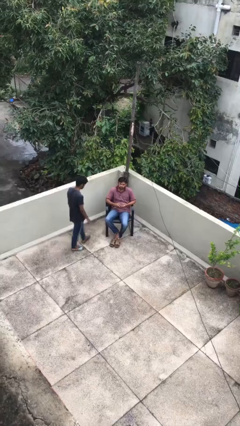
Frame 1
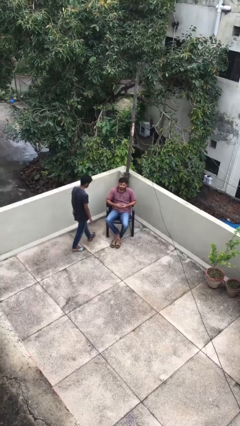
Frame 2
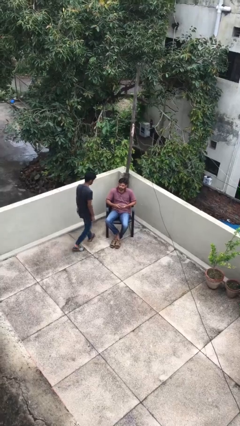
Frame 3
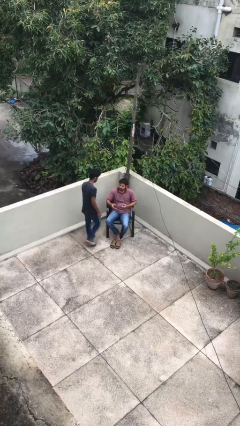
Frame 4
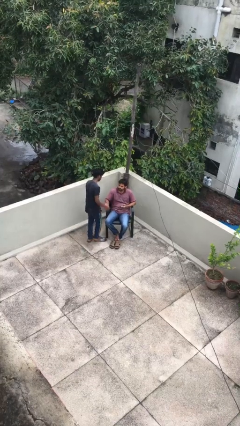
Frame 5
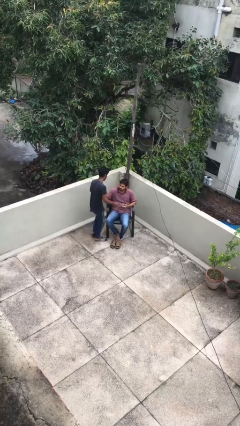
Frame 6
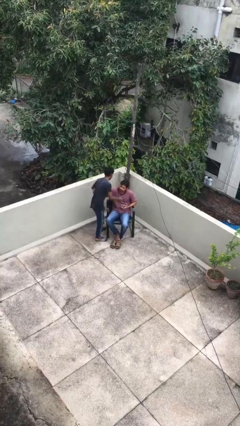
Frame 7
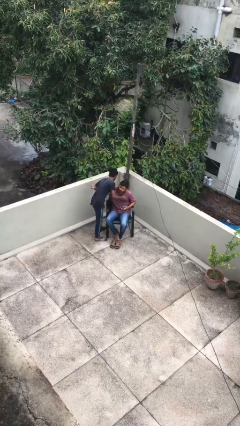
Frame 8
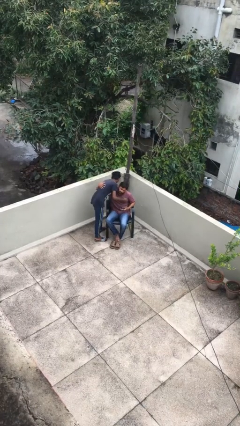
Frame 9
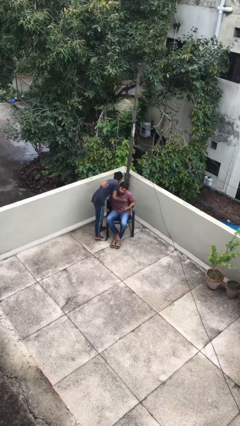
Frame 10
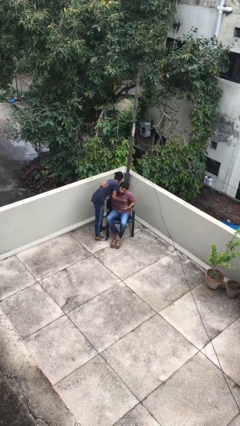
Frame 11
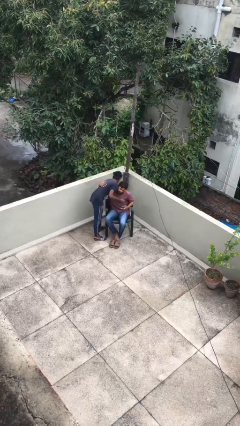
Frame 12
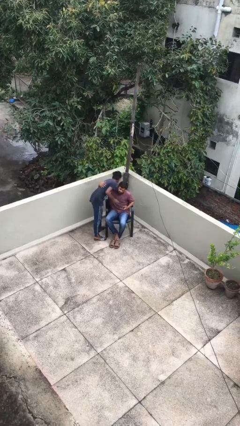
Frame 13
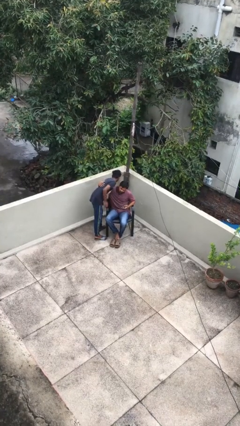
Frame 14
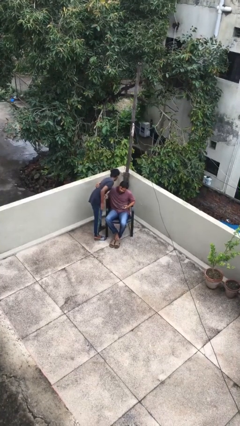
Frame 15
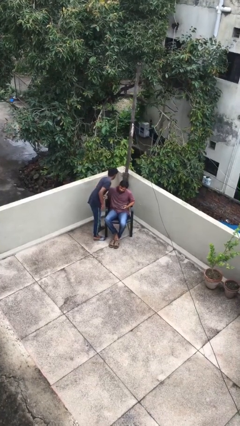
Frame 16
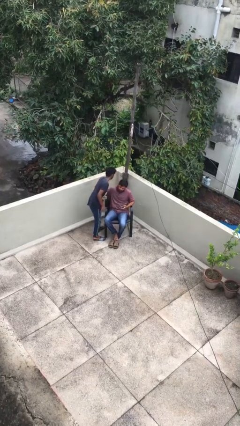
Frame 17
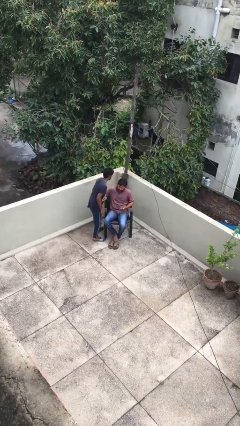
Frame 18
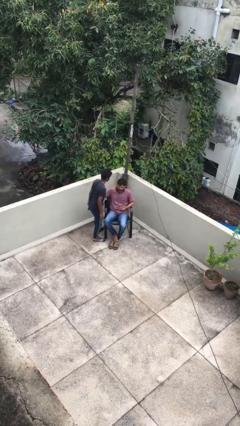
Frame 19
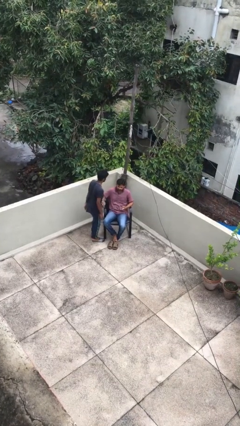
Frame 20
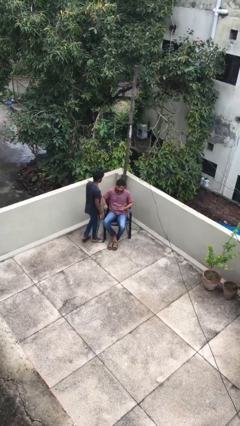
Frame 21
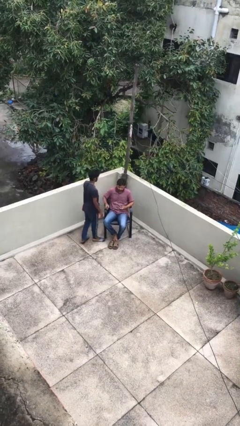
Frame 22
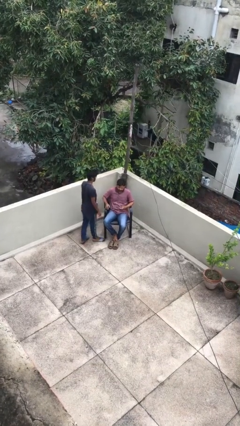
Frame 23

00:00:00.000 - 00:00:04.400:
person embraces person

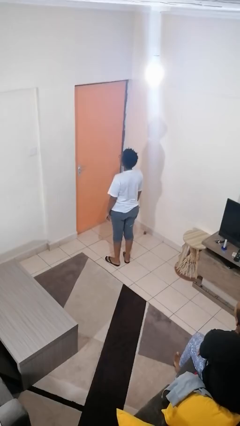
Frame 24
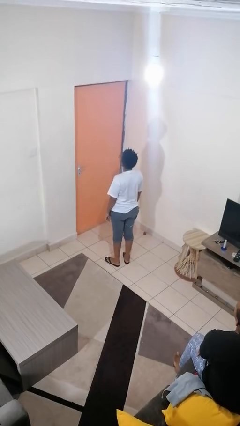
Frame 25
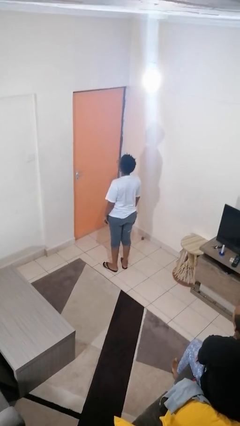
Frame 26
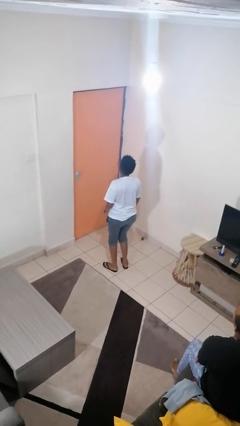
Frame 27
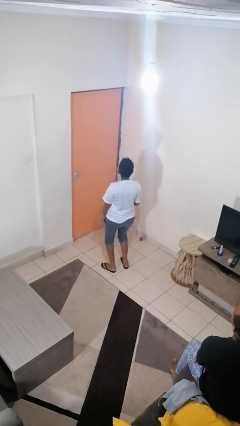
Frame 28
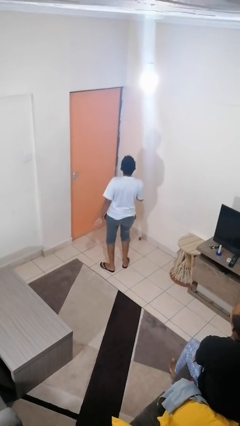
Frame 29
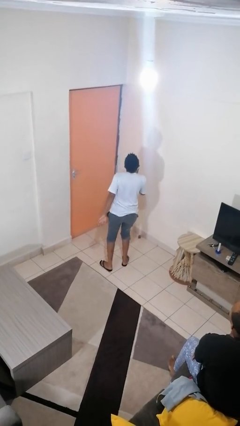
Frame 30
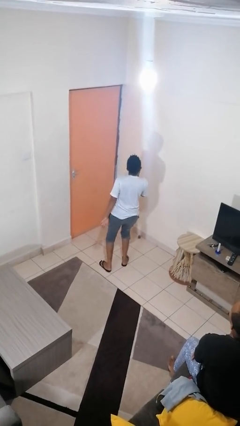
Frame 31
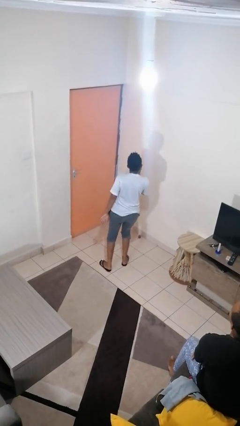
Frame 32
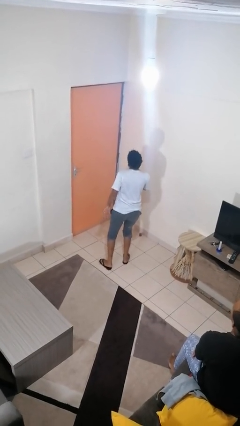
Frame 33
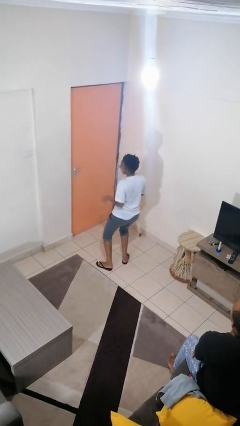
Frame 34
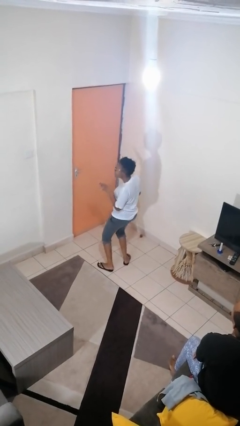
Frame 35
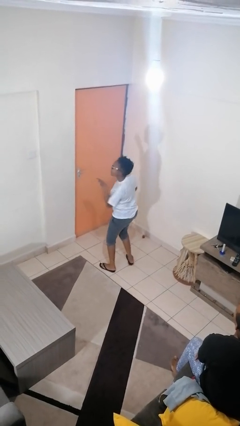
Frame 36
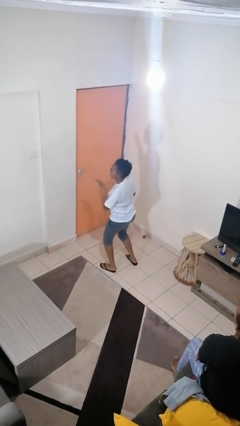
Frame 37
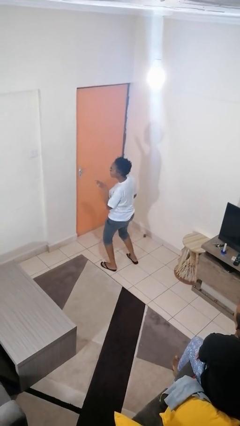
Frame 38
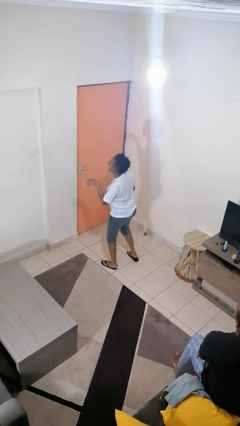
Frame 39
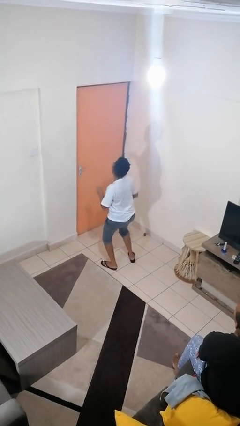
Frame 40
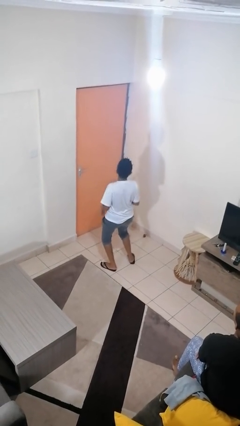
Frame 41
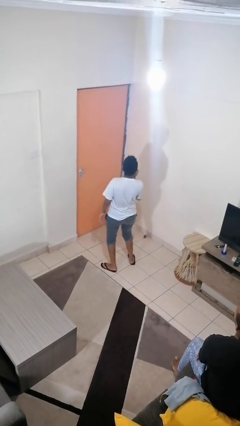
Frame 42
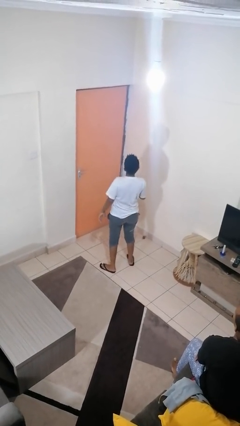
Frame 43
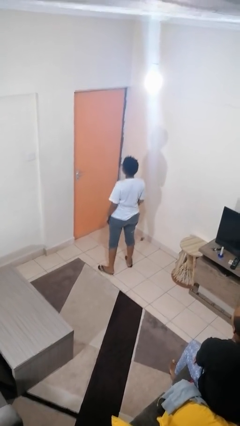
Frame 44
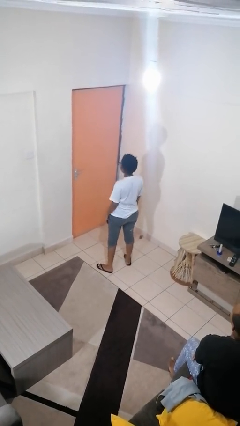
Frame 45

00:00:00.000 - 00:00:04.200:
person dances in place

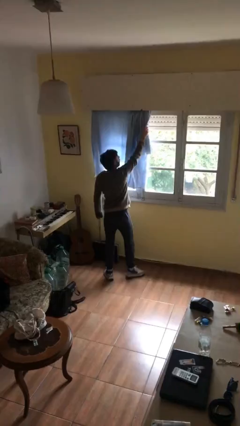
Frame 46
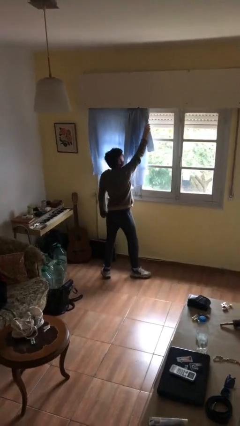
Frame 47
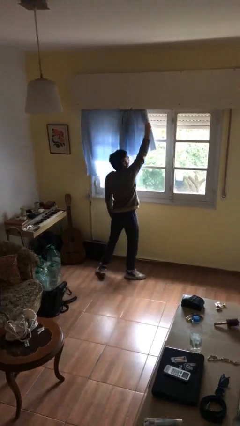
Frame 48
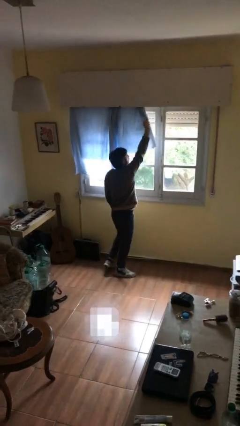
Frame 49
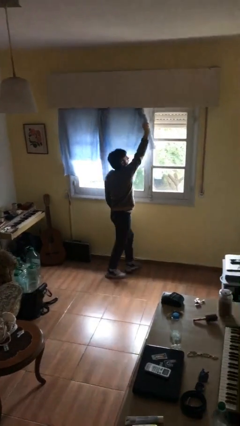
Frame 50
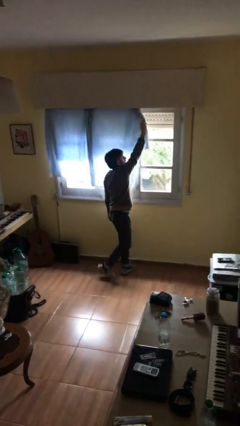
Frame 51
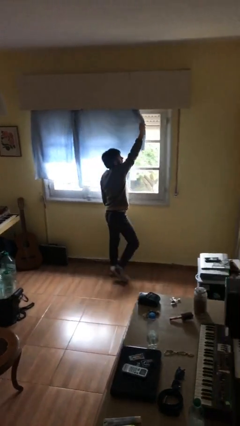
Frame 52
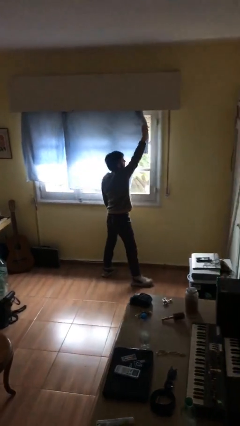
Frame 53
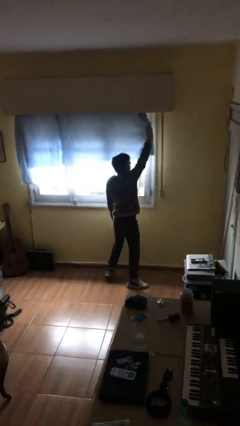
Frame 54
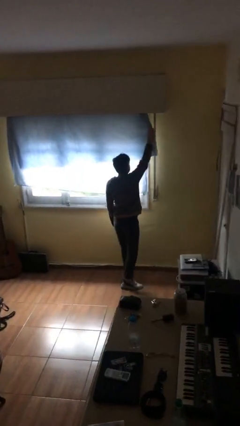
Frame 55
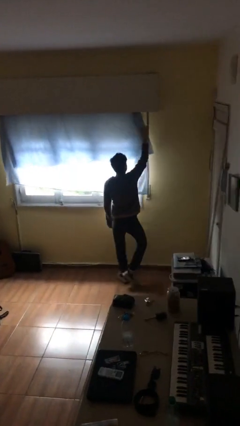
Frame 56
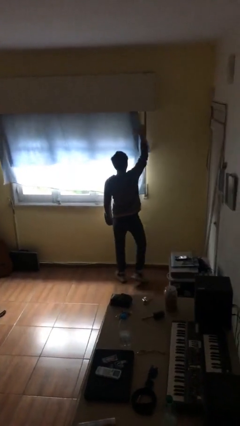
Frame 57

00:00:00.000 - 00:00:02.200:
person closes curtains

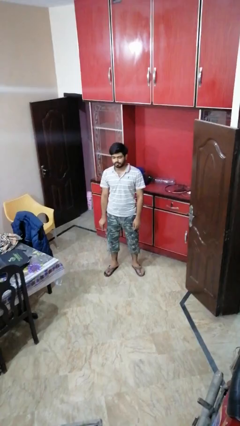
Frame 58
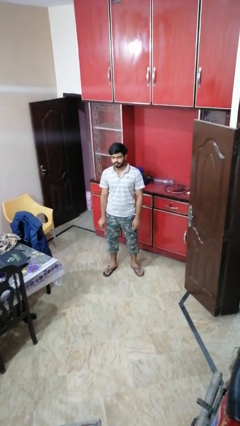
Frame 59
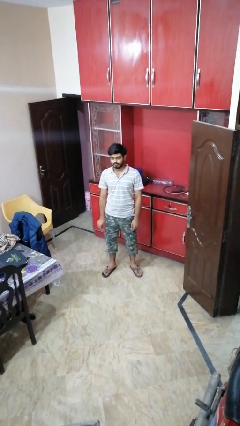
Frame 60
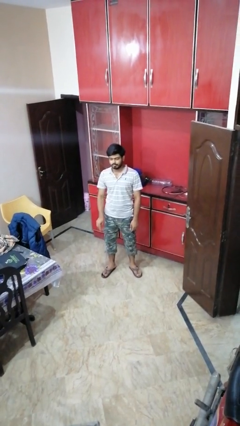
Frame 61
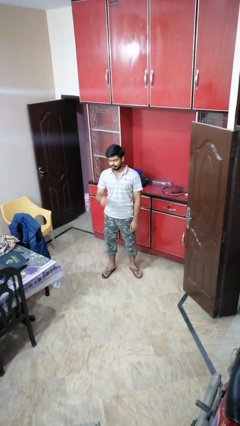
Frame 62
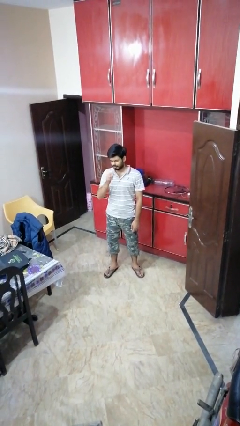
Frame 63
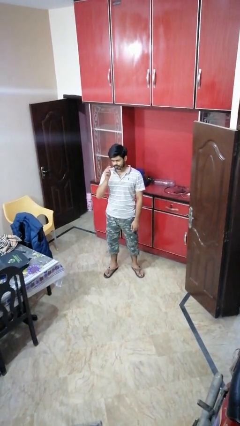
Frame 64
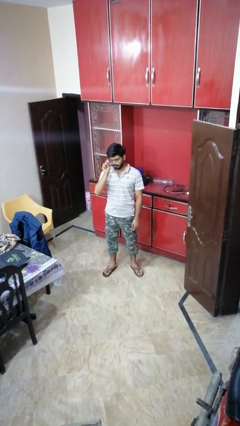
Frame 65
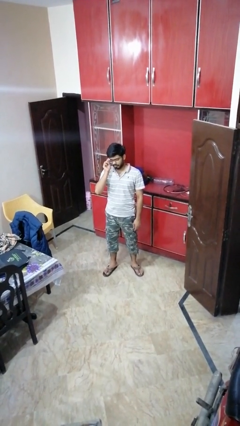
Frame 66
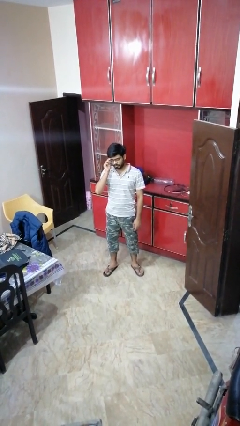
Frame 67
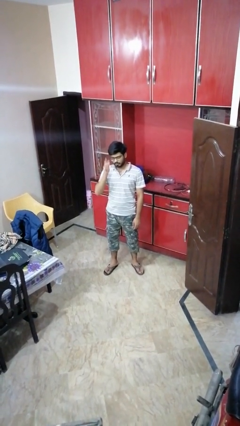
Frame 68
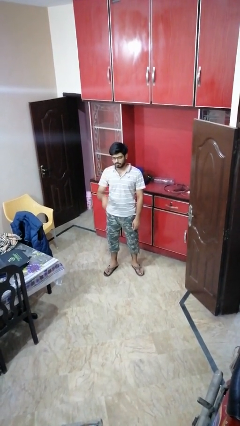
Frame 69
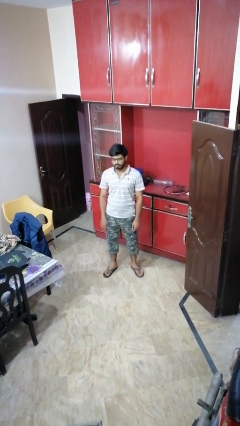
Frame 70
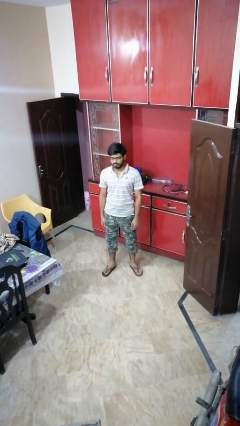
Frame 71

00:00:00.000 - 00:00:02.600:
person puts on glasses

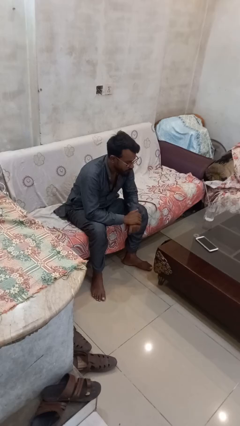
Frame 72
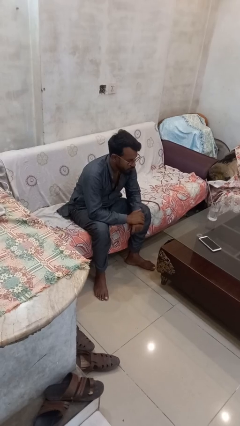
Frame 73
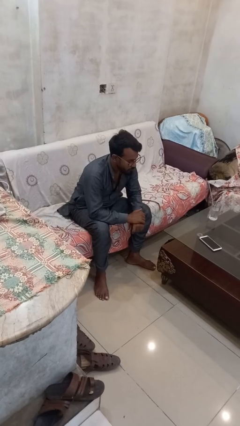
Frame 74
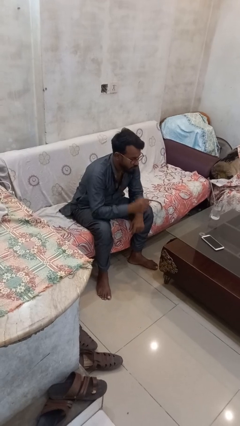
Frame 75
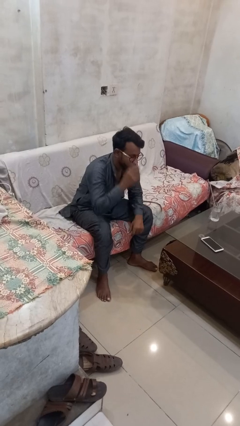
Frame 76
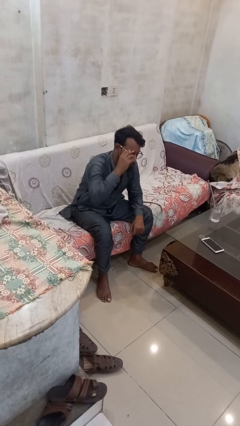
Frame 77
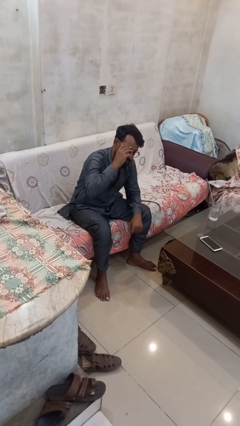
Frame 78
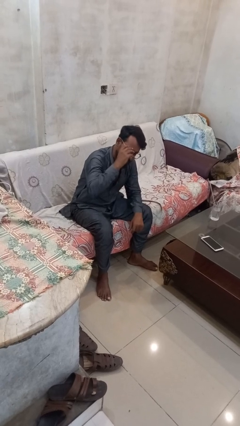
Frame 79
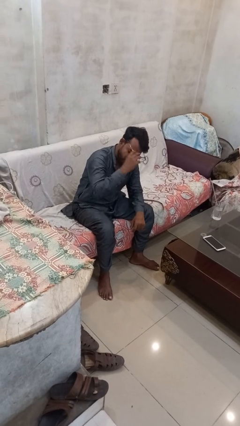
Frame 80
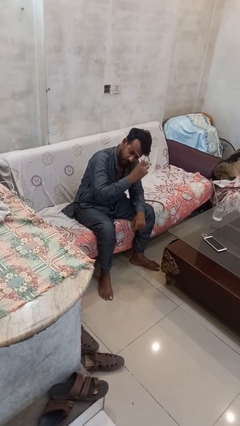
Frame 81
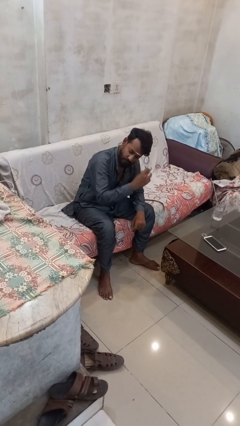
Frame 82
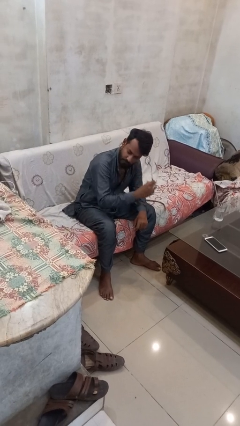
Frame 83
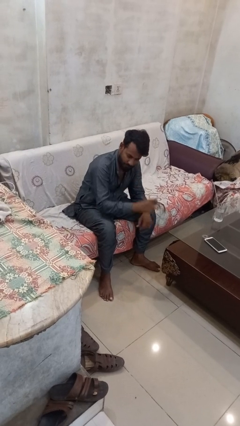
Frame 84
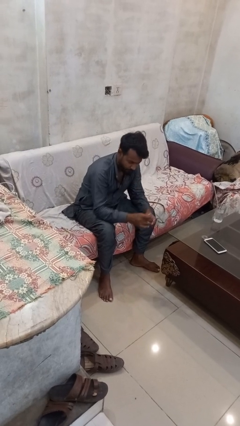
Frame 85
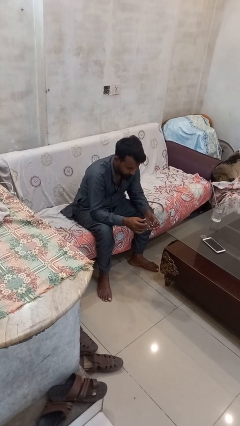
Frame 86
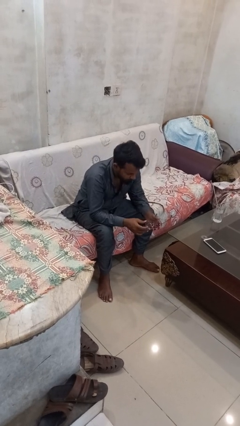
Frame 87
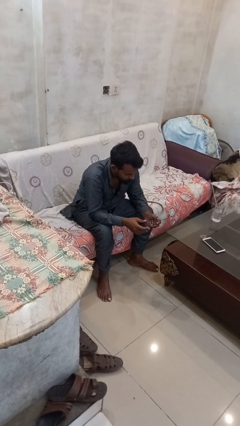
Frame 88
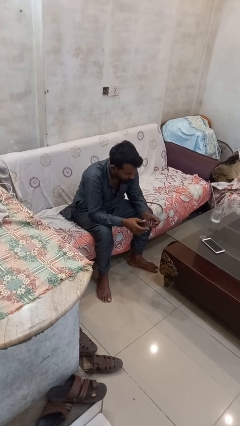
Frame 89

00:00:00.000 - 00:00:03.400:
person takes off glasses

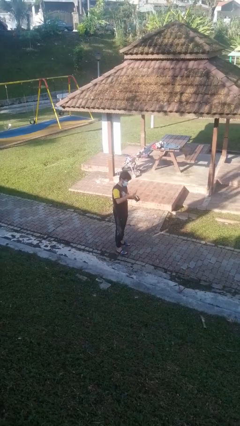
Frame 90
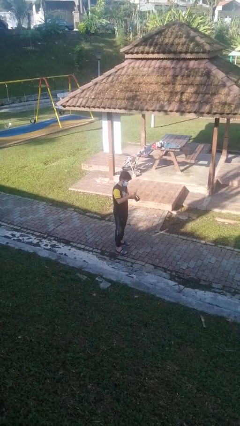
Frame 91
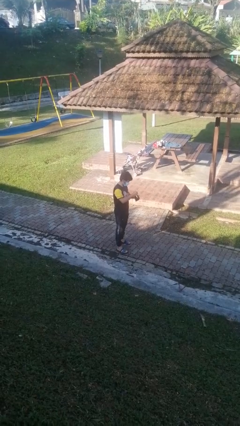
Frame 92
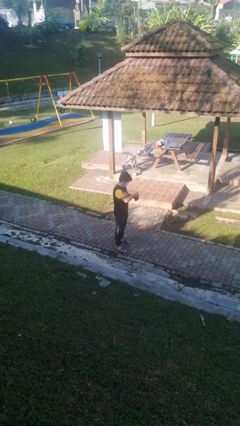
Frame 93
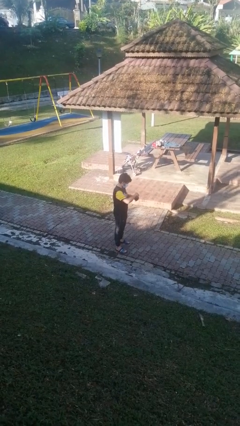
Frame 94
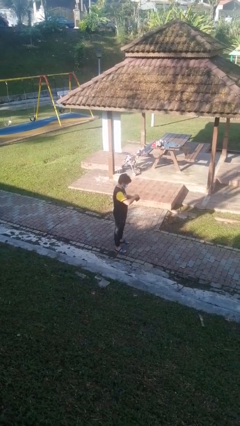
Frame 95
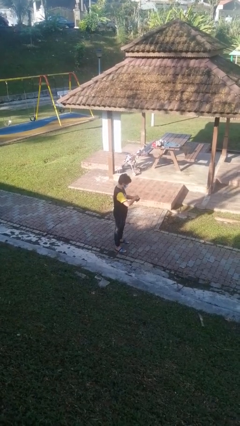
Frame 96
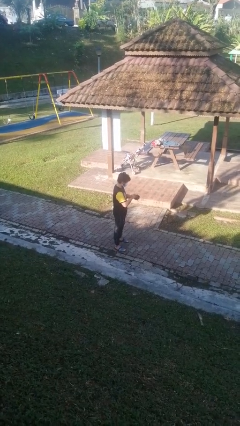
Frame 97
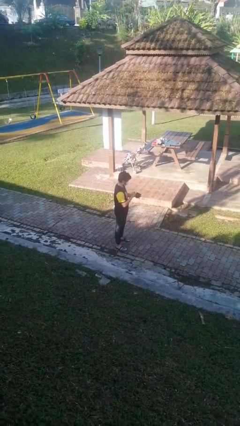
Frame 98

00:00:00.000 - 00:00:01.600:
person puts object into purse
